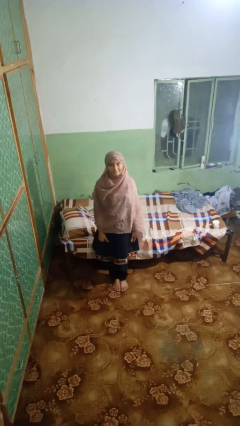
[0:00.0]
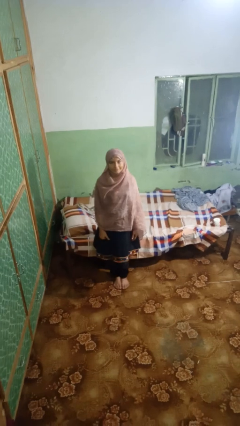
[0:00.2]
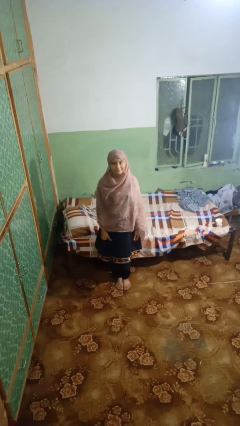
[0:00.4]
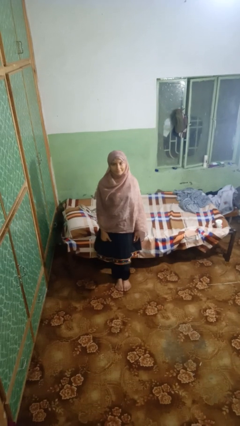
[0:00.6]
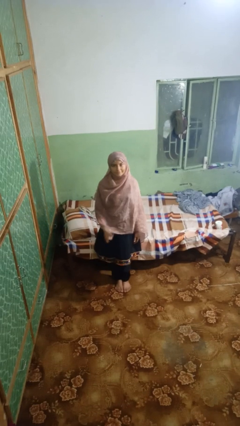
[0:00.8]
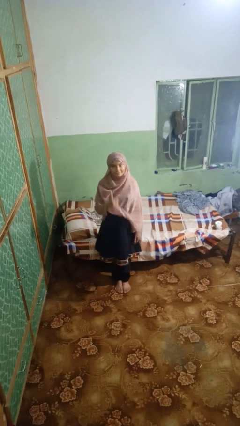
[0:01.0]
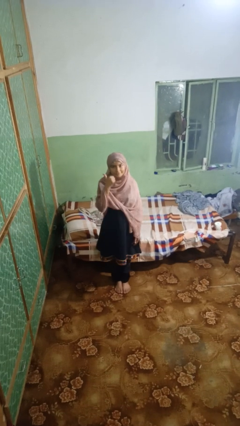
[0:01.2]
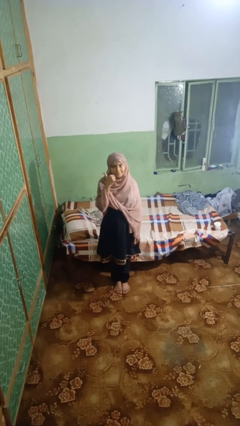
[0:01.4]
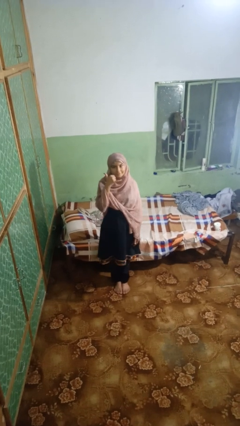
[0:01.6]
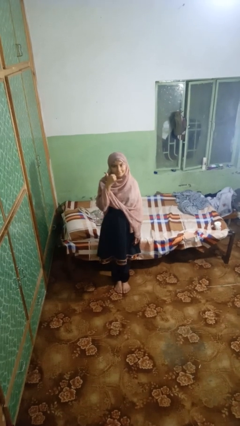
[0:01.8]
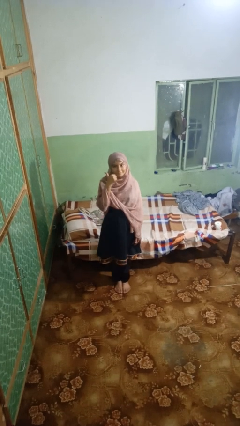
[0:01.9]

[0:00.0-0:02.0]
person gestures call me

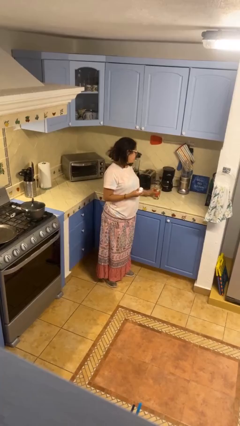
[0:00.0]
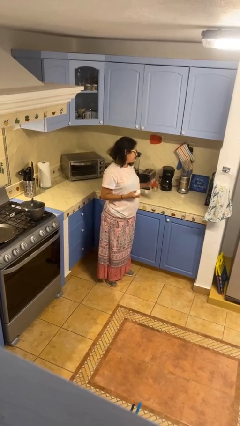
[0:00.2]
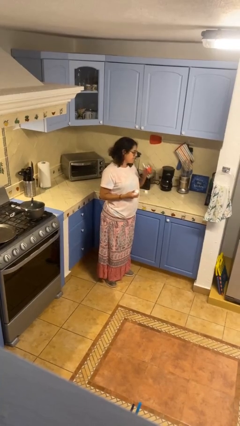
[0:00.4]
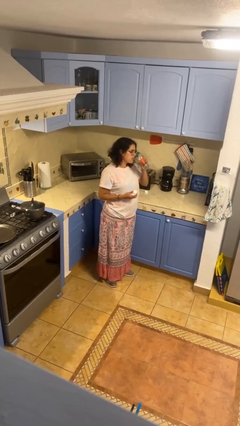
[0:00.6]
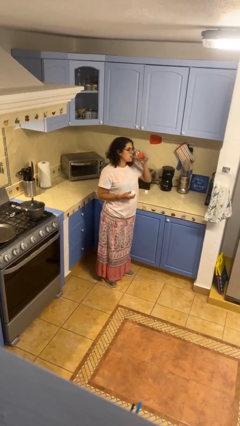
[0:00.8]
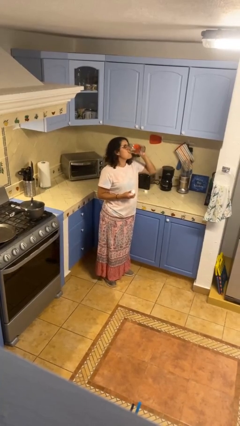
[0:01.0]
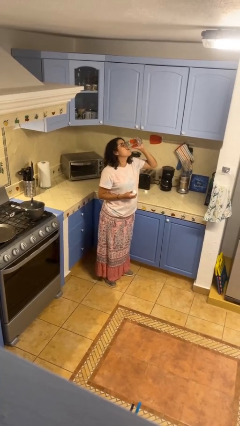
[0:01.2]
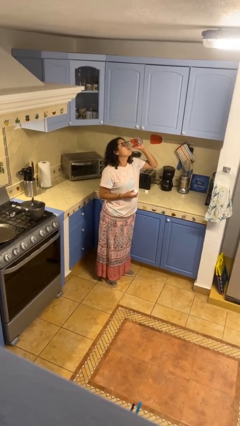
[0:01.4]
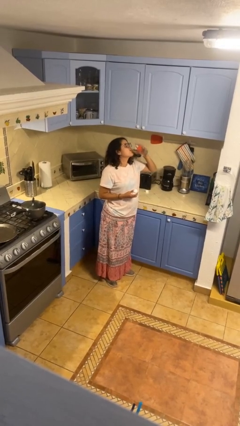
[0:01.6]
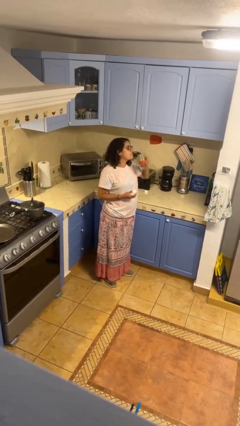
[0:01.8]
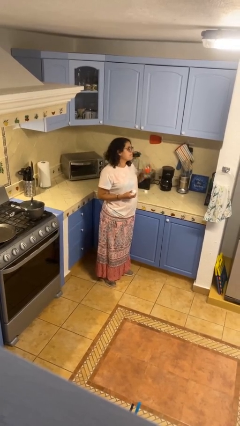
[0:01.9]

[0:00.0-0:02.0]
person drinks from cup

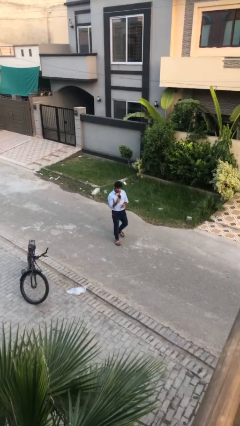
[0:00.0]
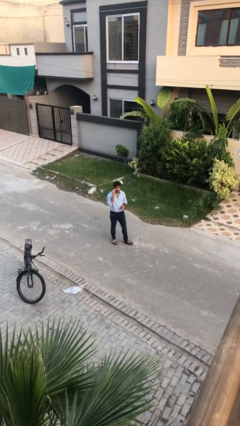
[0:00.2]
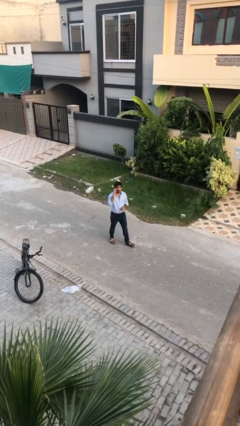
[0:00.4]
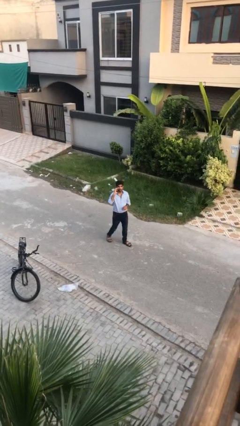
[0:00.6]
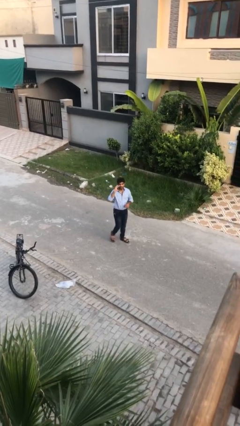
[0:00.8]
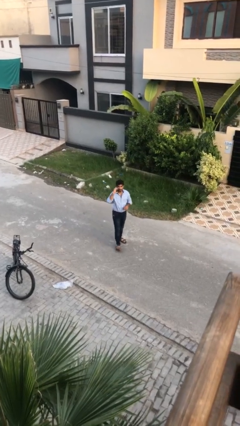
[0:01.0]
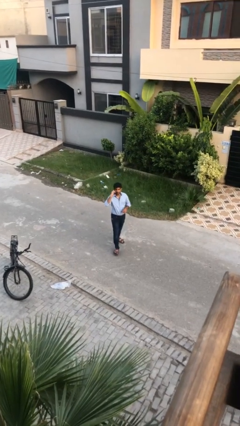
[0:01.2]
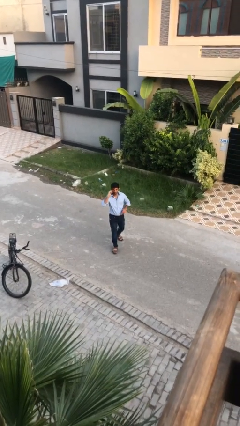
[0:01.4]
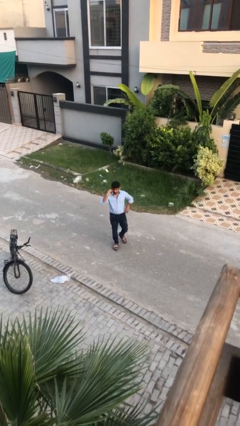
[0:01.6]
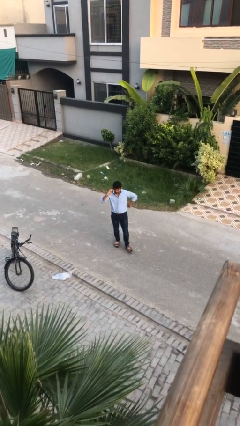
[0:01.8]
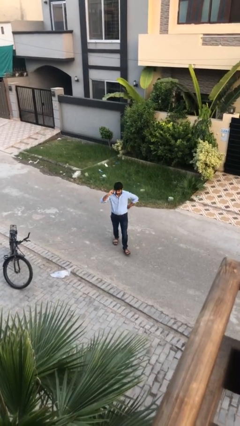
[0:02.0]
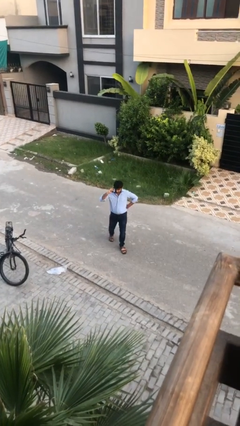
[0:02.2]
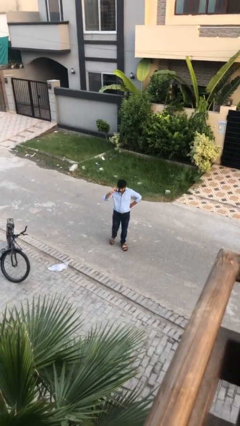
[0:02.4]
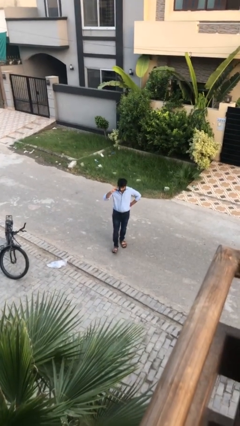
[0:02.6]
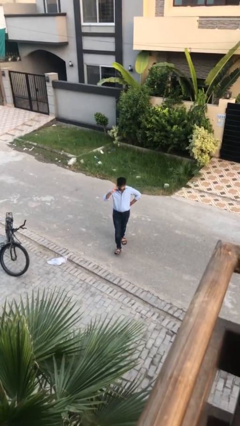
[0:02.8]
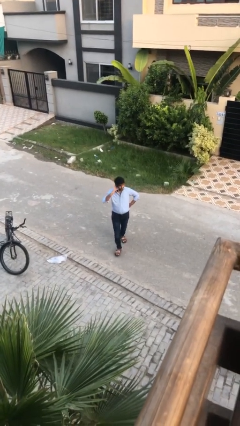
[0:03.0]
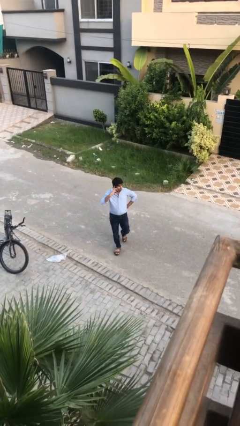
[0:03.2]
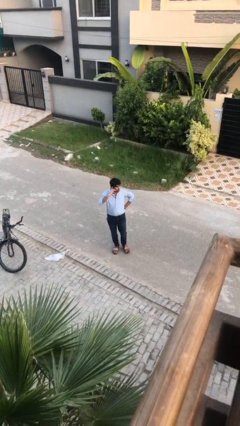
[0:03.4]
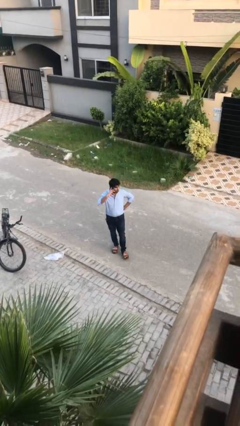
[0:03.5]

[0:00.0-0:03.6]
person talks on phone

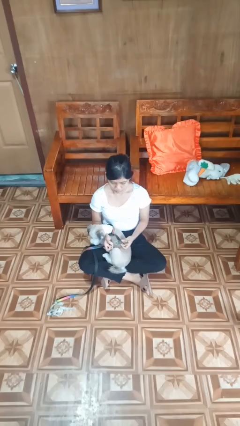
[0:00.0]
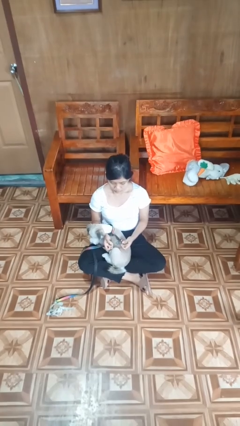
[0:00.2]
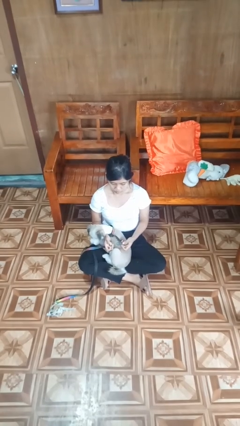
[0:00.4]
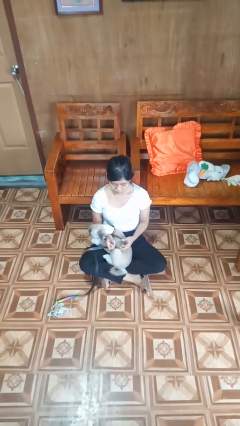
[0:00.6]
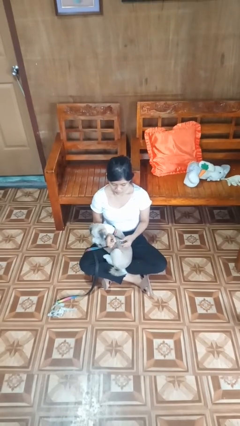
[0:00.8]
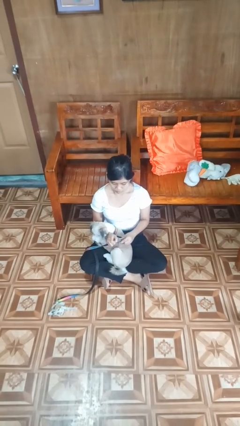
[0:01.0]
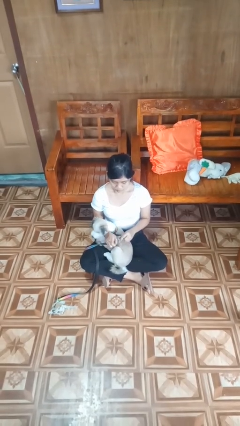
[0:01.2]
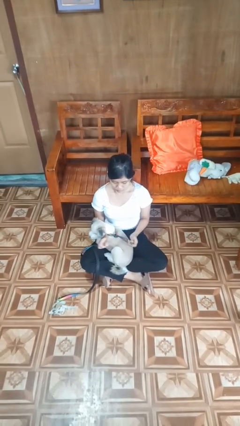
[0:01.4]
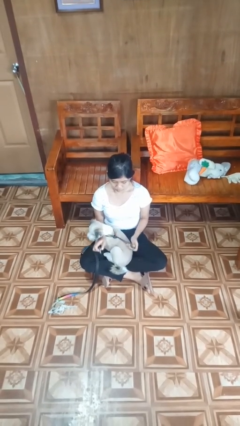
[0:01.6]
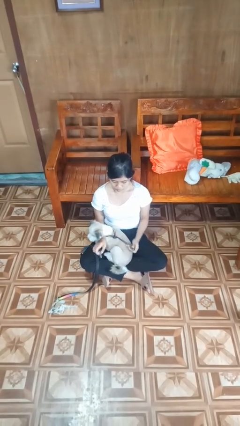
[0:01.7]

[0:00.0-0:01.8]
person unattaches leash from dog

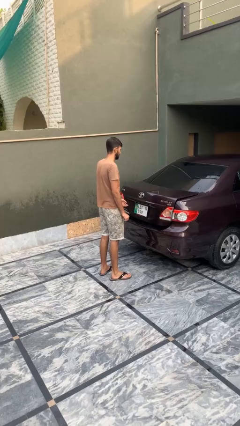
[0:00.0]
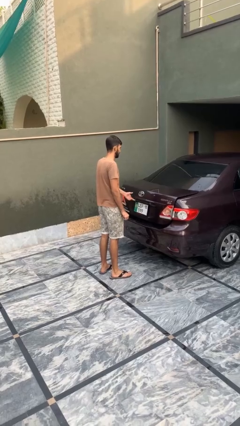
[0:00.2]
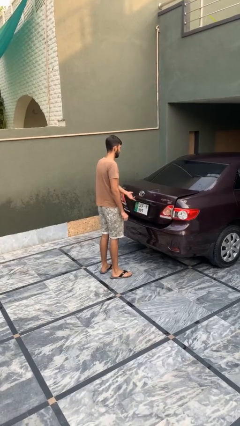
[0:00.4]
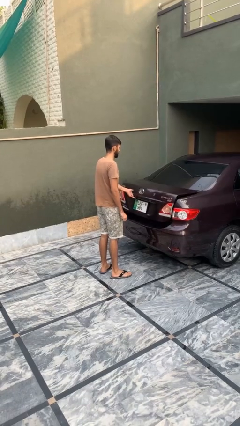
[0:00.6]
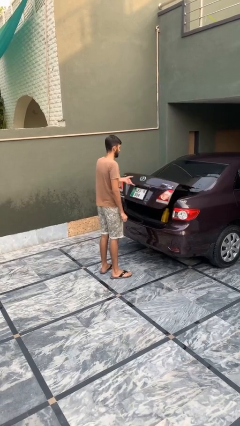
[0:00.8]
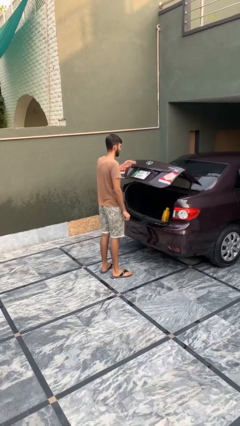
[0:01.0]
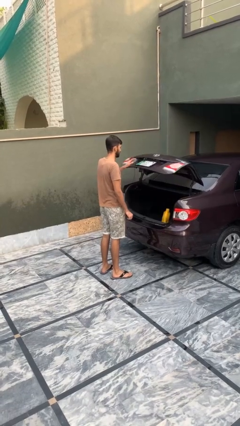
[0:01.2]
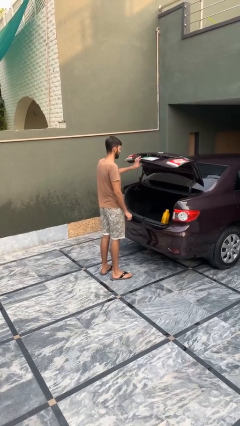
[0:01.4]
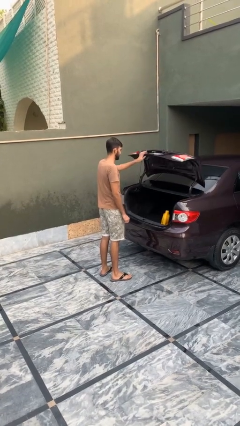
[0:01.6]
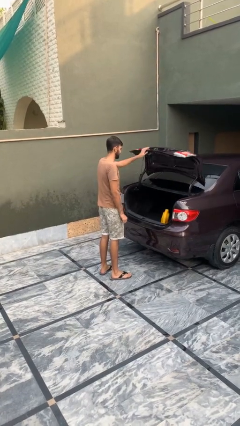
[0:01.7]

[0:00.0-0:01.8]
person opens car trunk

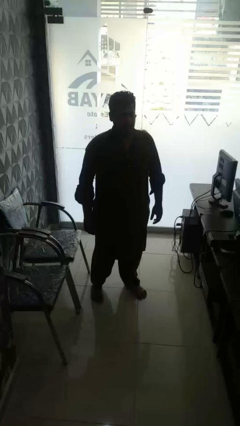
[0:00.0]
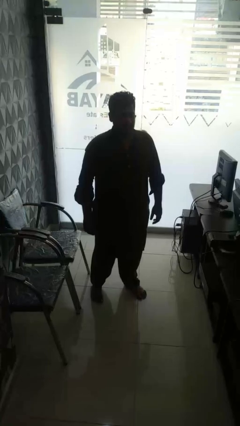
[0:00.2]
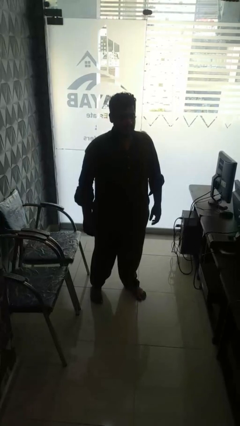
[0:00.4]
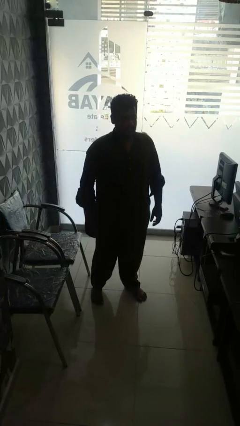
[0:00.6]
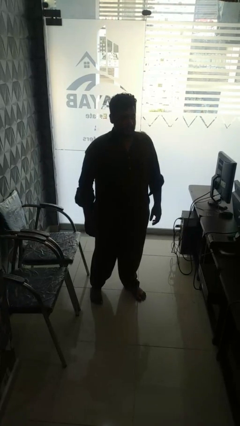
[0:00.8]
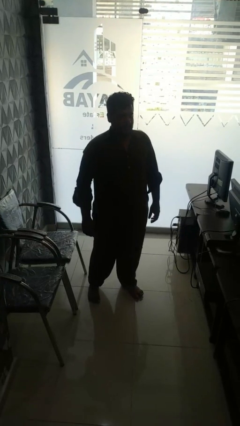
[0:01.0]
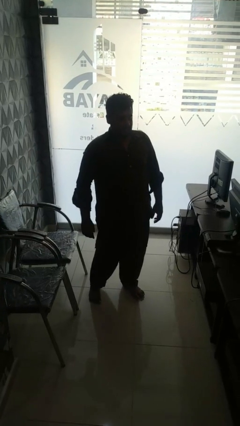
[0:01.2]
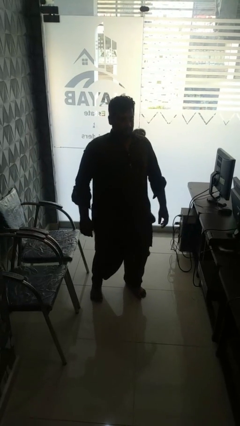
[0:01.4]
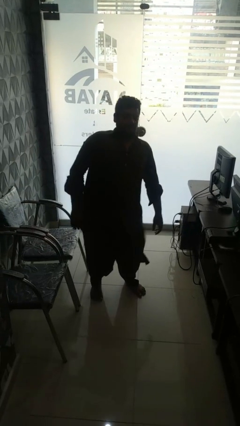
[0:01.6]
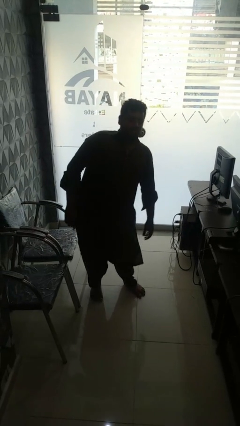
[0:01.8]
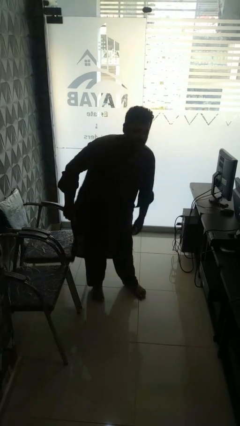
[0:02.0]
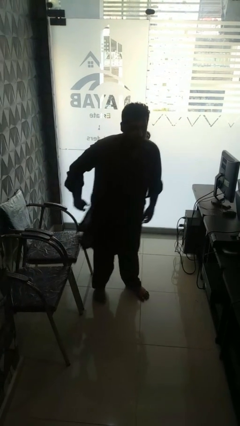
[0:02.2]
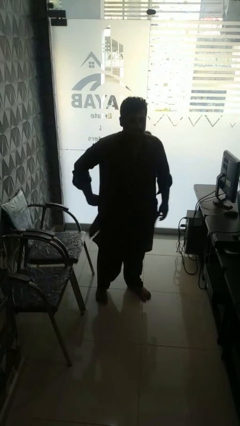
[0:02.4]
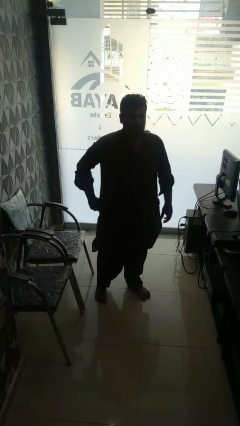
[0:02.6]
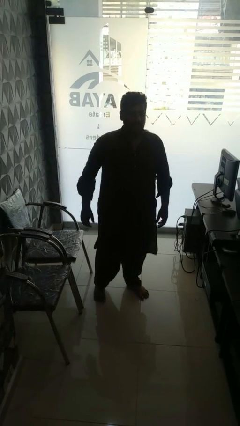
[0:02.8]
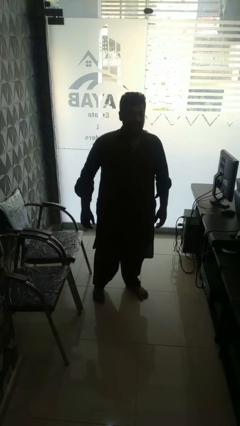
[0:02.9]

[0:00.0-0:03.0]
person wiggles hips

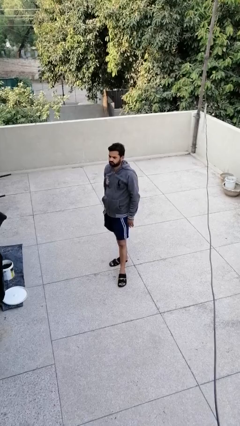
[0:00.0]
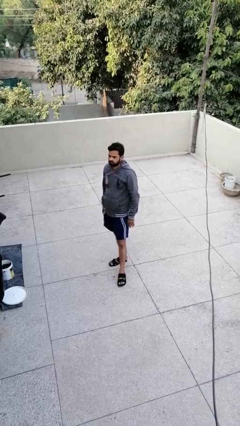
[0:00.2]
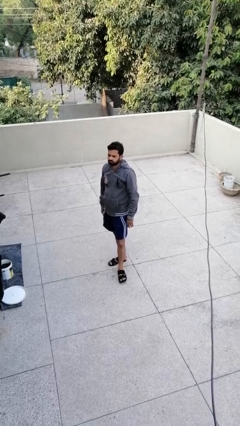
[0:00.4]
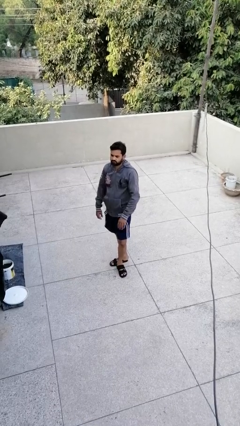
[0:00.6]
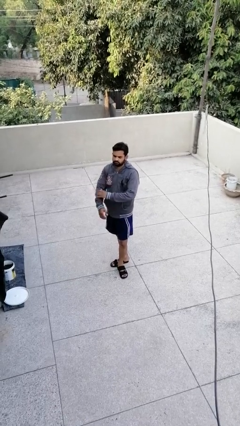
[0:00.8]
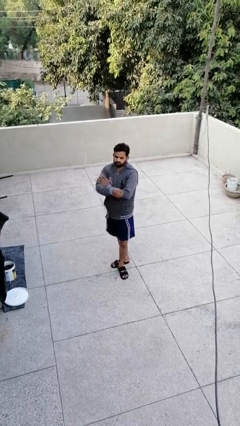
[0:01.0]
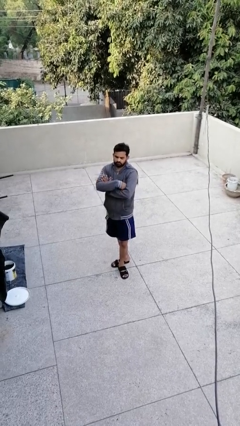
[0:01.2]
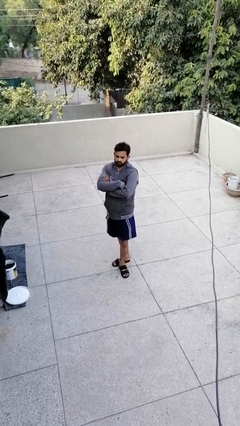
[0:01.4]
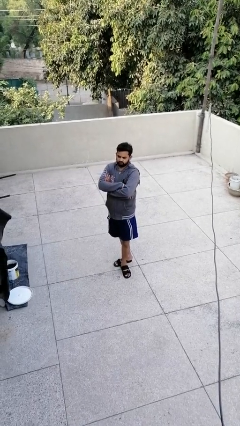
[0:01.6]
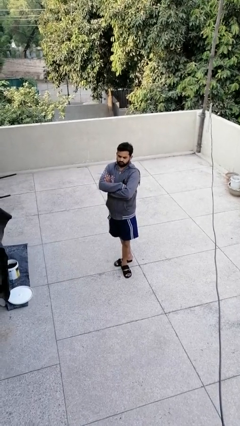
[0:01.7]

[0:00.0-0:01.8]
person crosses arms

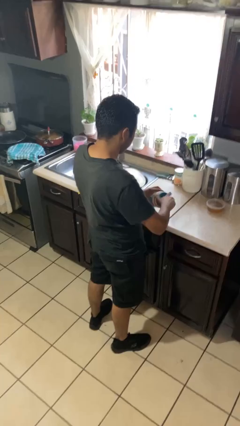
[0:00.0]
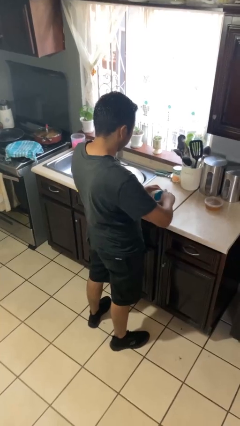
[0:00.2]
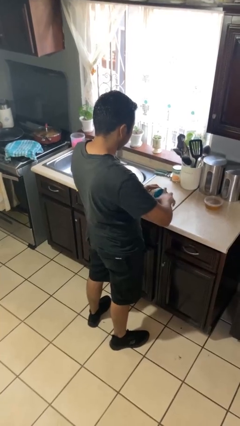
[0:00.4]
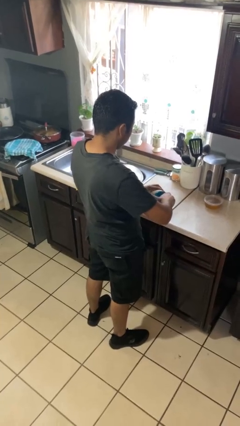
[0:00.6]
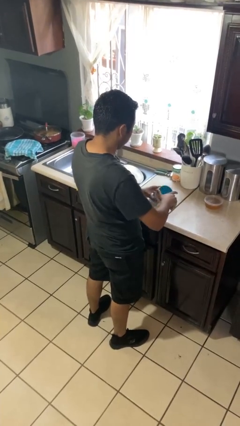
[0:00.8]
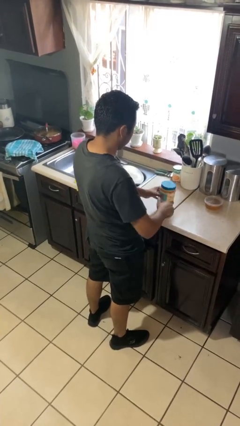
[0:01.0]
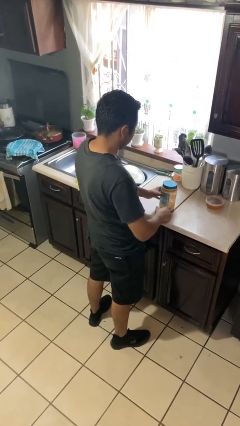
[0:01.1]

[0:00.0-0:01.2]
person closes jar
